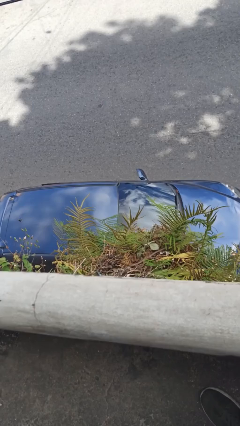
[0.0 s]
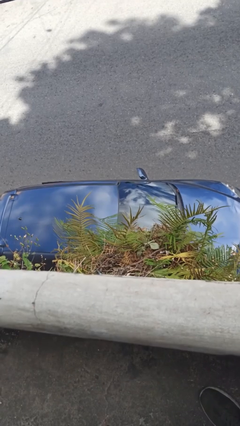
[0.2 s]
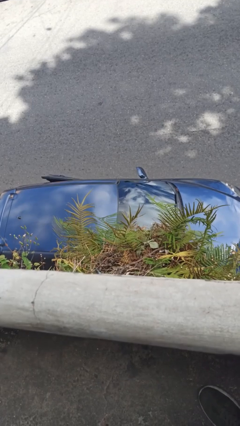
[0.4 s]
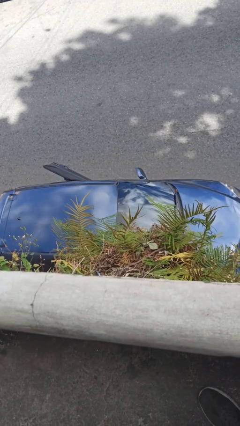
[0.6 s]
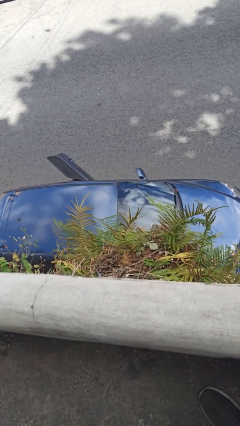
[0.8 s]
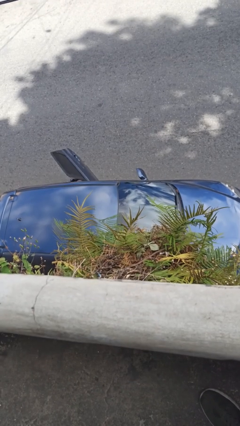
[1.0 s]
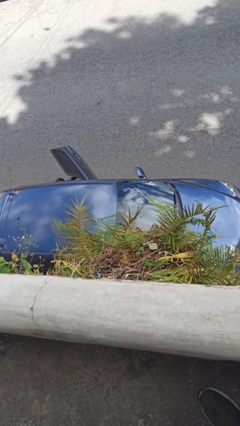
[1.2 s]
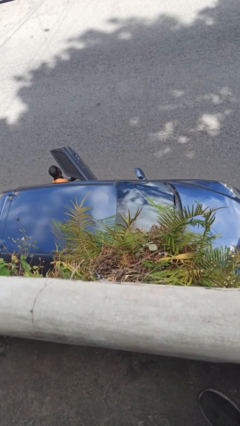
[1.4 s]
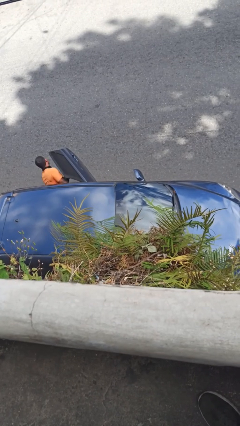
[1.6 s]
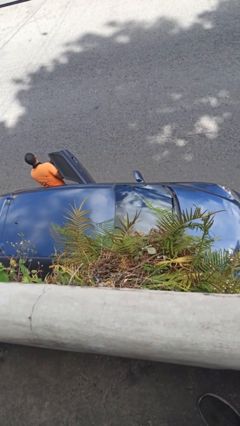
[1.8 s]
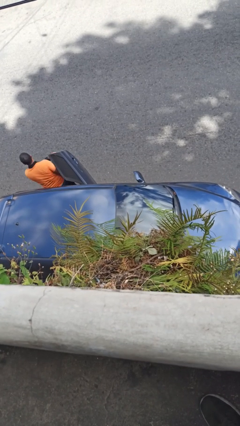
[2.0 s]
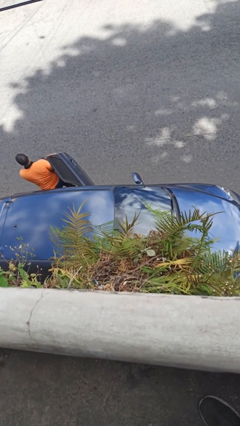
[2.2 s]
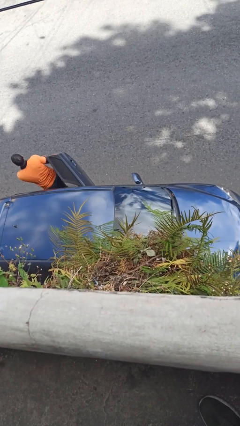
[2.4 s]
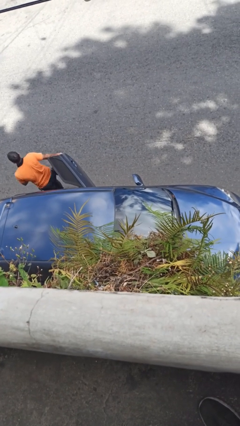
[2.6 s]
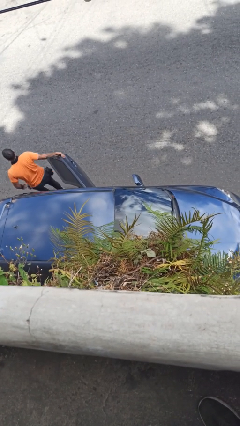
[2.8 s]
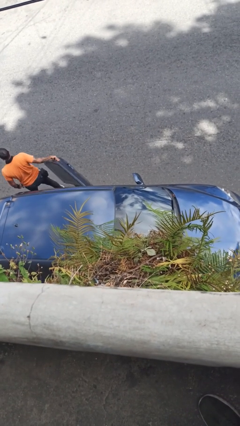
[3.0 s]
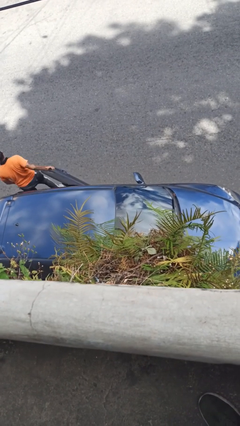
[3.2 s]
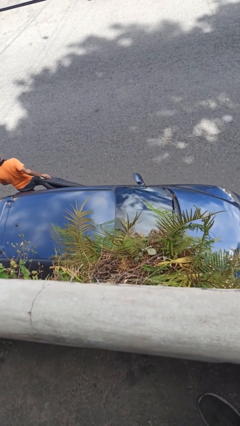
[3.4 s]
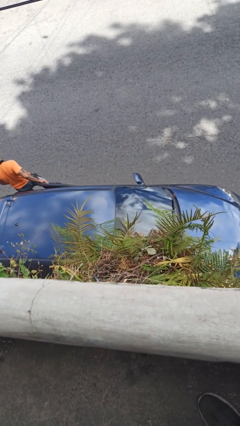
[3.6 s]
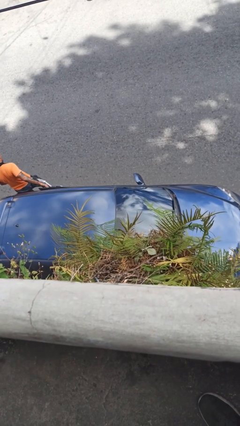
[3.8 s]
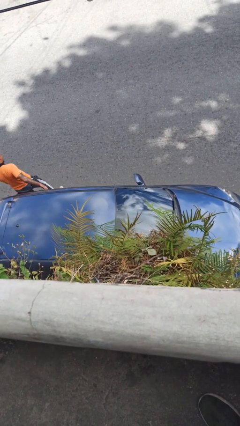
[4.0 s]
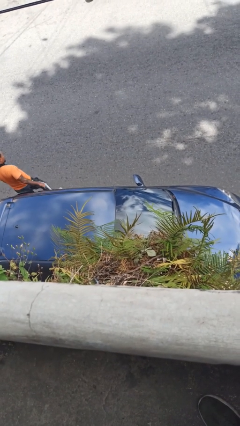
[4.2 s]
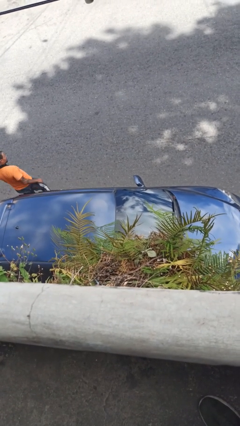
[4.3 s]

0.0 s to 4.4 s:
car drops off person

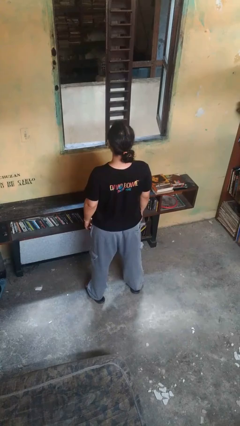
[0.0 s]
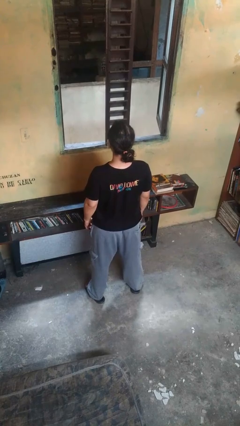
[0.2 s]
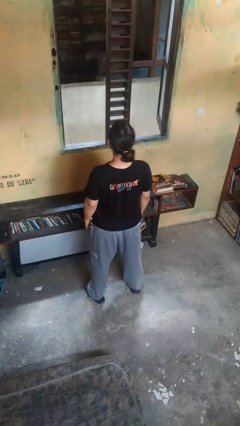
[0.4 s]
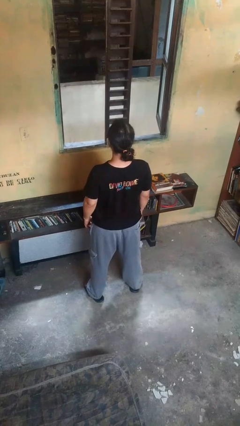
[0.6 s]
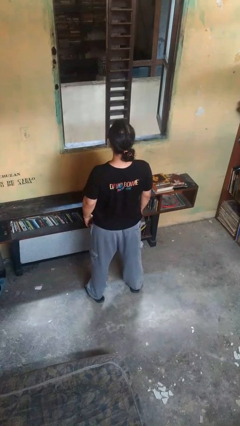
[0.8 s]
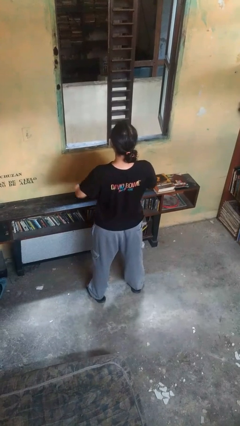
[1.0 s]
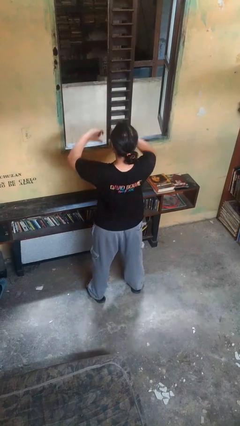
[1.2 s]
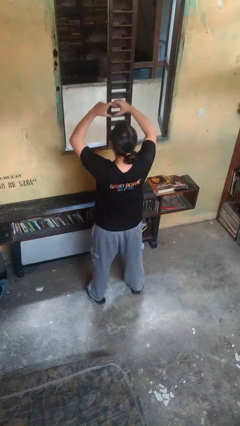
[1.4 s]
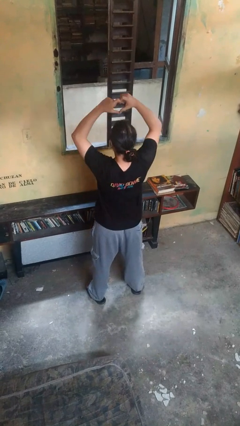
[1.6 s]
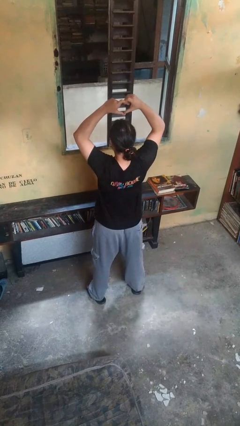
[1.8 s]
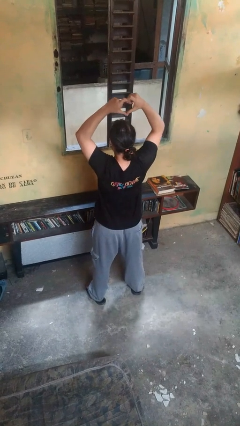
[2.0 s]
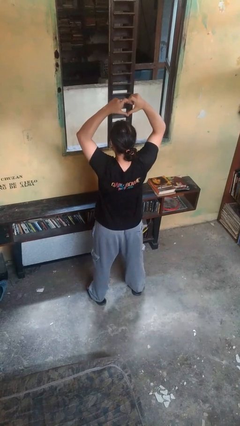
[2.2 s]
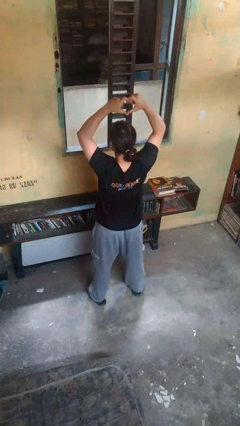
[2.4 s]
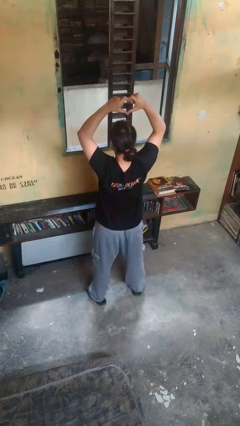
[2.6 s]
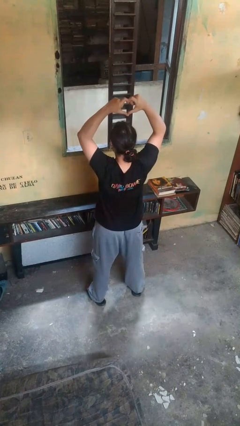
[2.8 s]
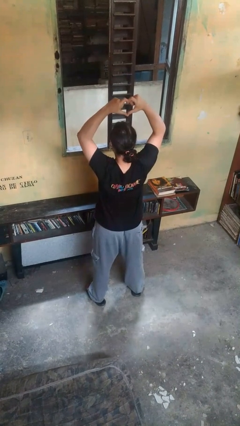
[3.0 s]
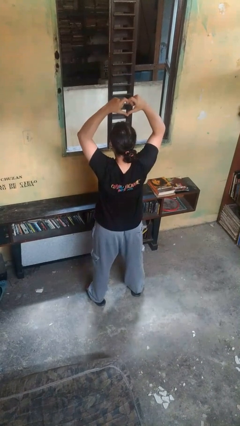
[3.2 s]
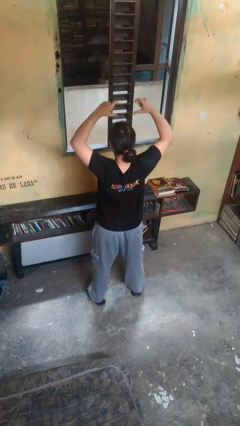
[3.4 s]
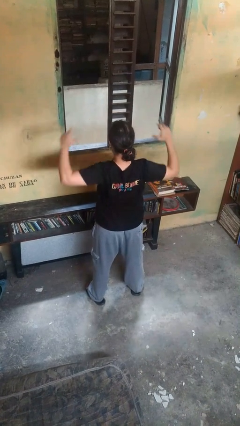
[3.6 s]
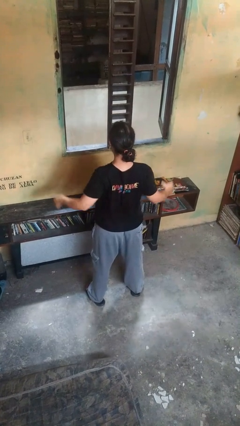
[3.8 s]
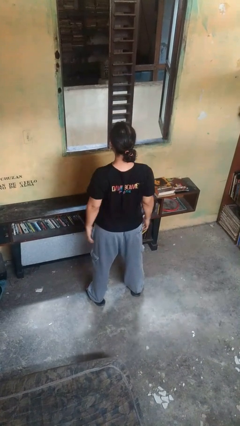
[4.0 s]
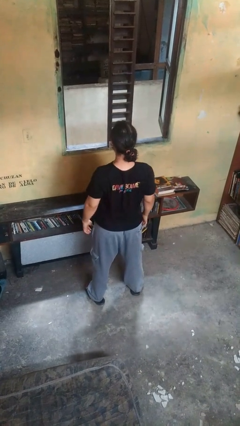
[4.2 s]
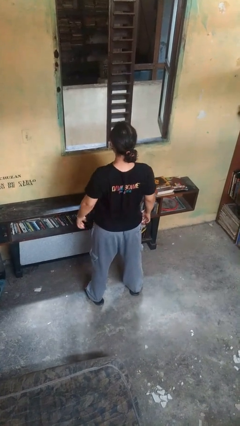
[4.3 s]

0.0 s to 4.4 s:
person gestures heart

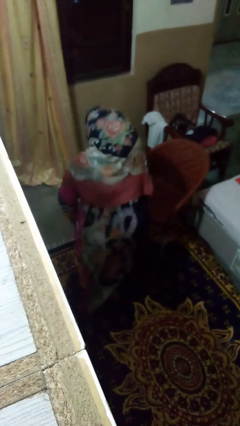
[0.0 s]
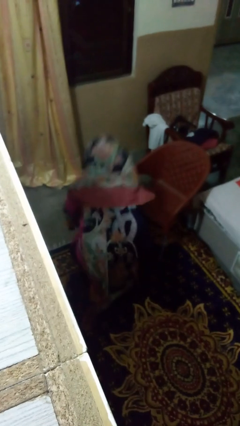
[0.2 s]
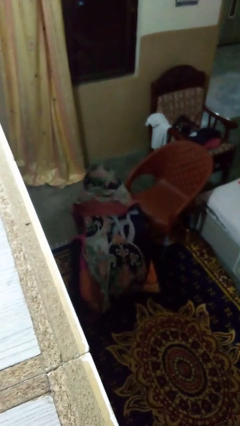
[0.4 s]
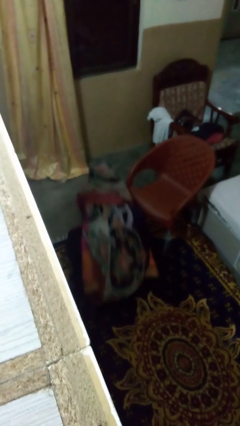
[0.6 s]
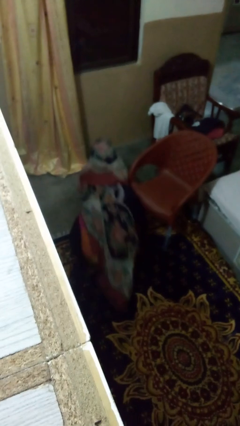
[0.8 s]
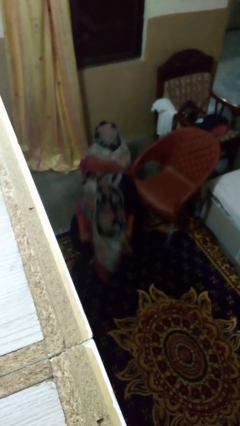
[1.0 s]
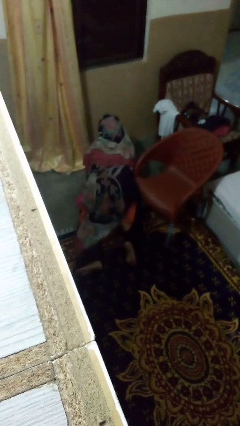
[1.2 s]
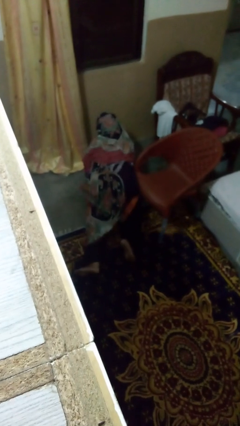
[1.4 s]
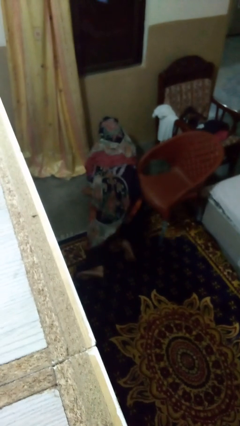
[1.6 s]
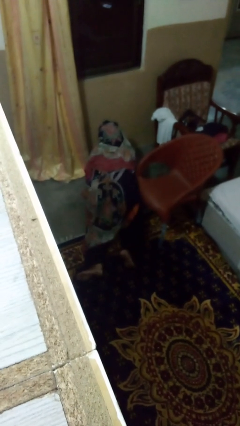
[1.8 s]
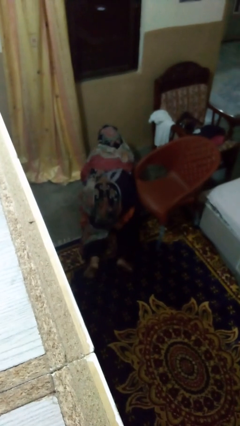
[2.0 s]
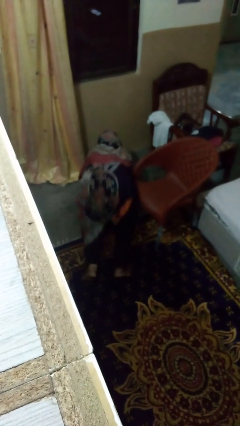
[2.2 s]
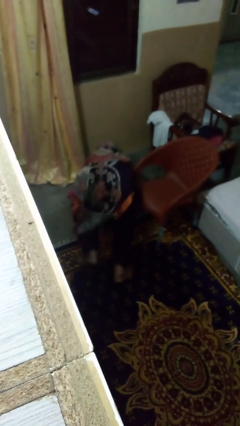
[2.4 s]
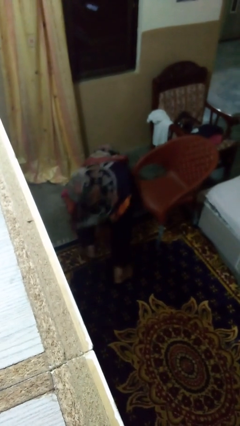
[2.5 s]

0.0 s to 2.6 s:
person lies down on floor

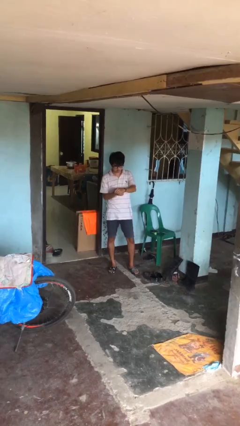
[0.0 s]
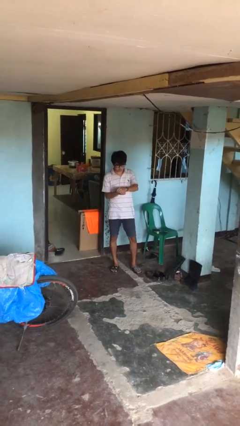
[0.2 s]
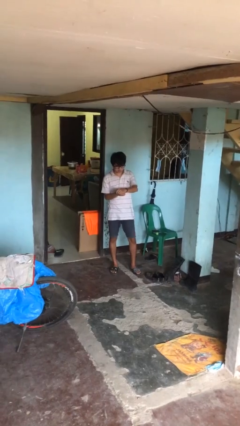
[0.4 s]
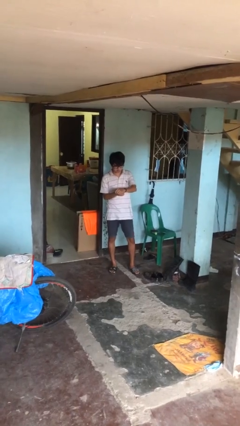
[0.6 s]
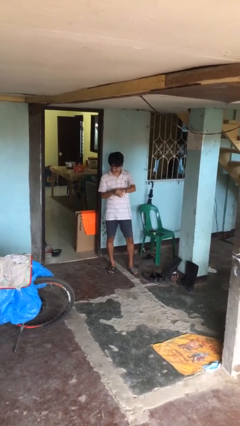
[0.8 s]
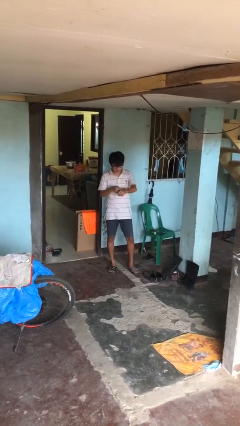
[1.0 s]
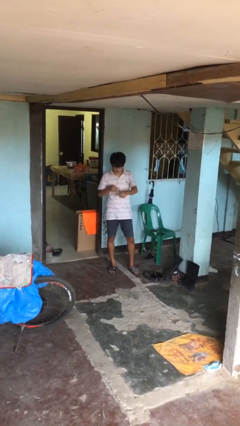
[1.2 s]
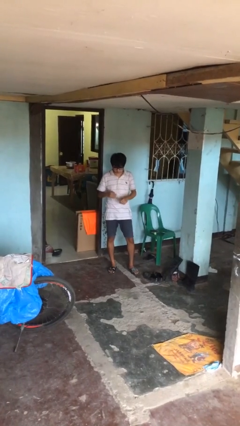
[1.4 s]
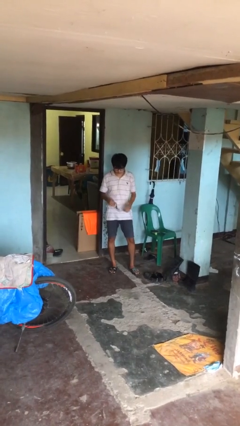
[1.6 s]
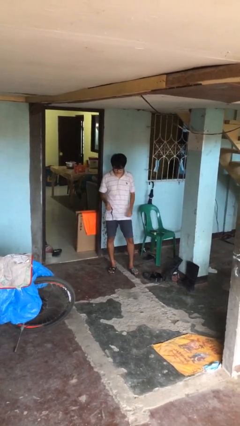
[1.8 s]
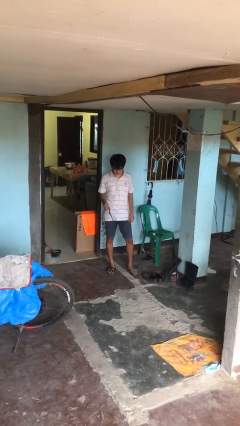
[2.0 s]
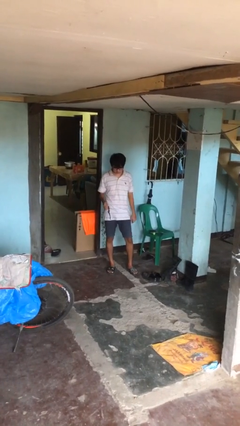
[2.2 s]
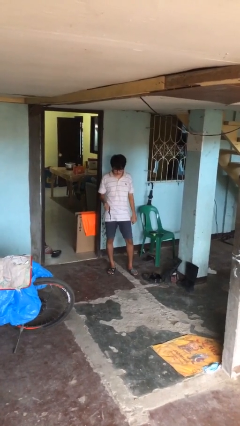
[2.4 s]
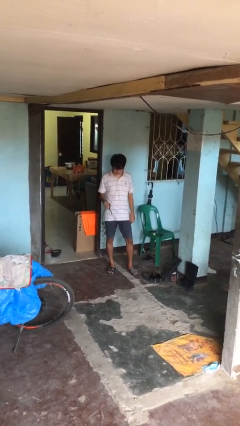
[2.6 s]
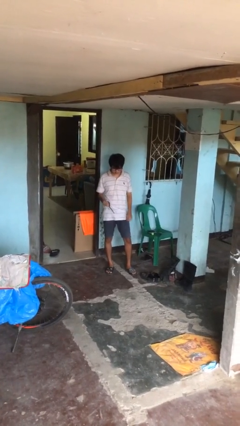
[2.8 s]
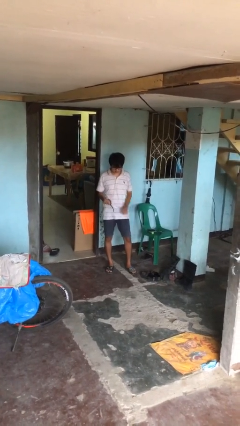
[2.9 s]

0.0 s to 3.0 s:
person takes off wristwatch

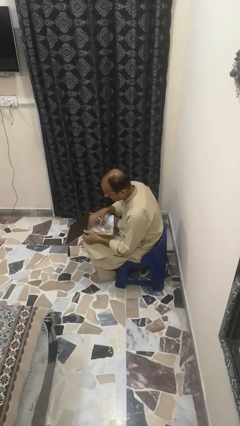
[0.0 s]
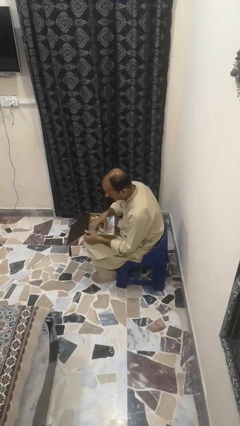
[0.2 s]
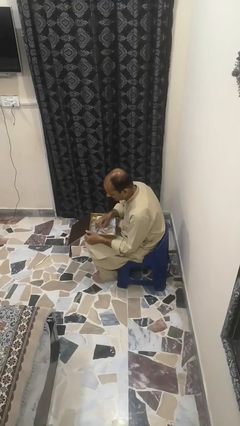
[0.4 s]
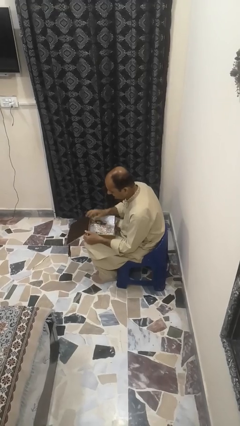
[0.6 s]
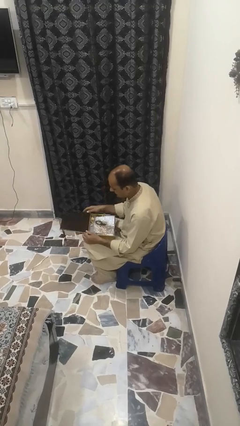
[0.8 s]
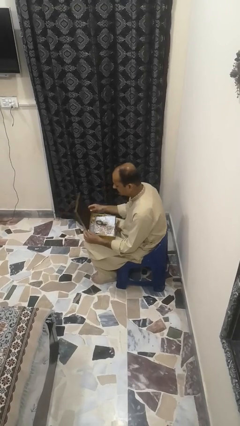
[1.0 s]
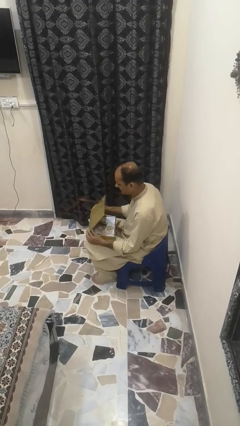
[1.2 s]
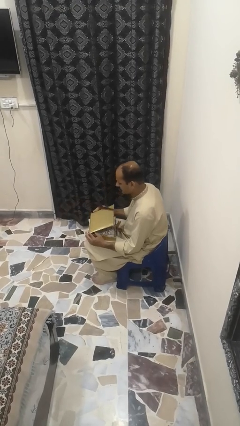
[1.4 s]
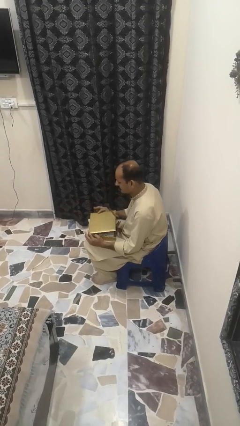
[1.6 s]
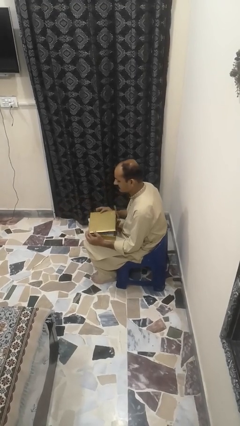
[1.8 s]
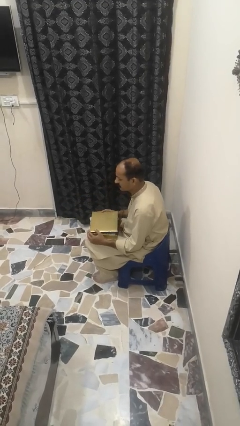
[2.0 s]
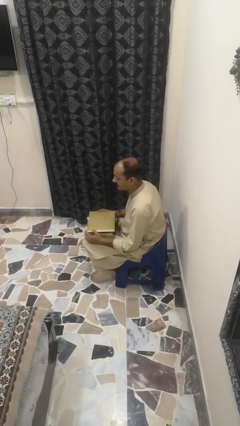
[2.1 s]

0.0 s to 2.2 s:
person closes jewelry box

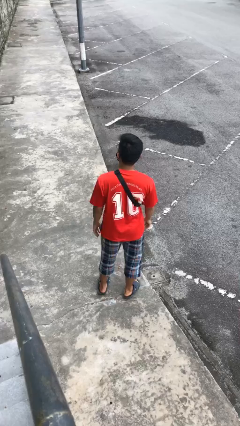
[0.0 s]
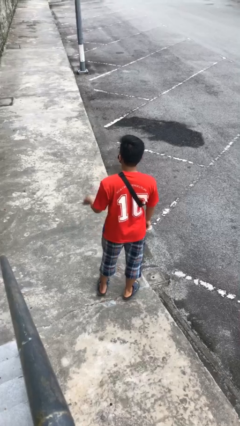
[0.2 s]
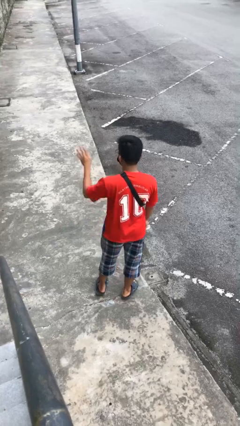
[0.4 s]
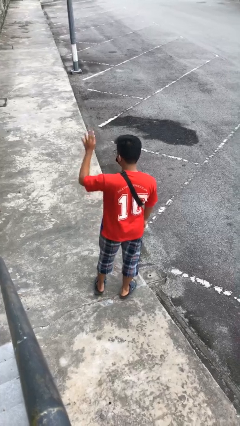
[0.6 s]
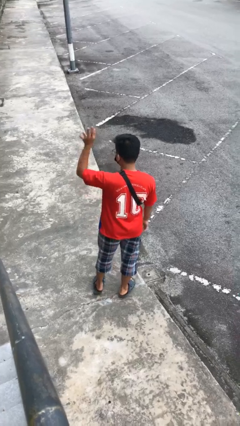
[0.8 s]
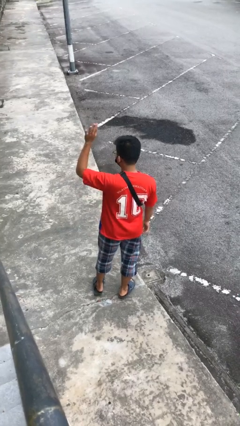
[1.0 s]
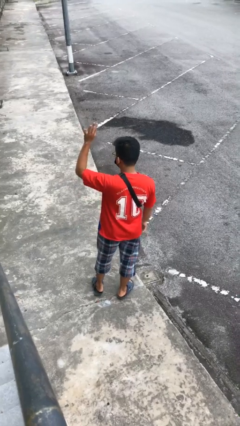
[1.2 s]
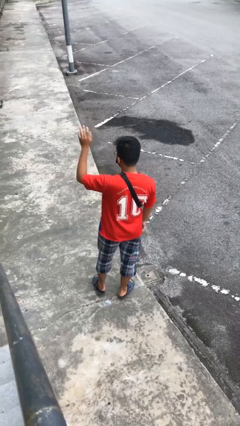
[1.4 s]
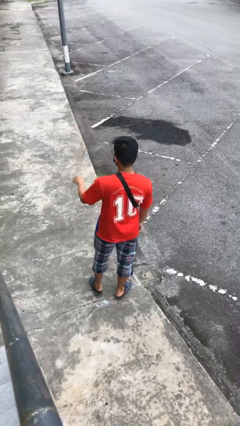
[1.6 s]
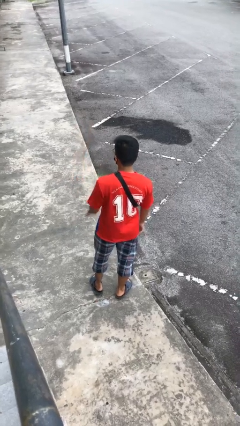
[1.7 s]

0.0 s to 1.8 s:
person waves at person
